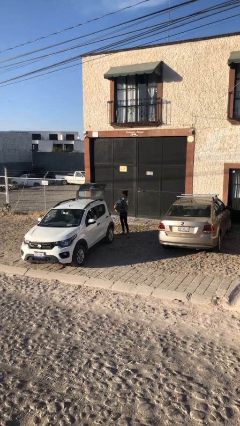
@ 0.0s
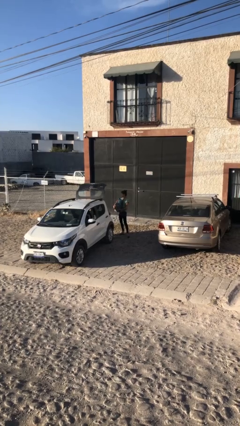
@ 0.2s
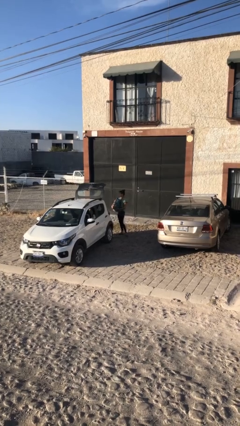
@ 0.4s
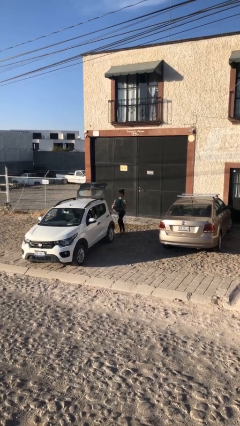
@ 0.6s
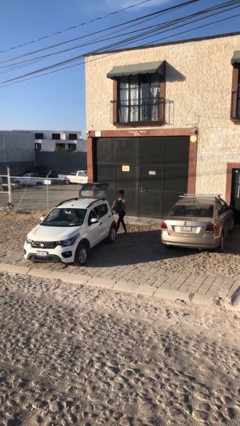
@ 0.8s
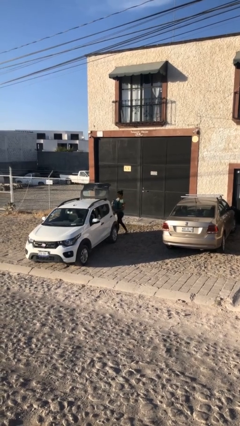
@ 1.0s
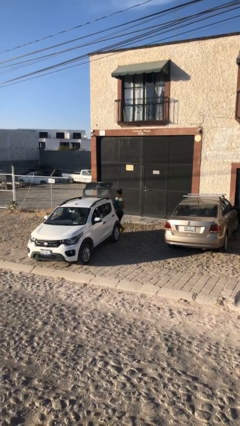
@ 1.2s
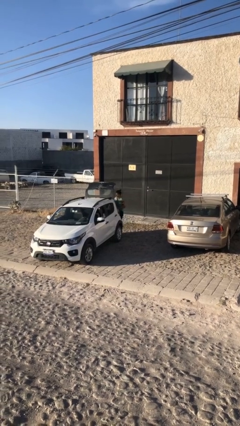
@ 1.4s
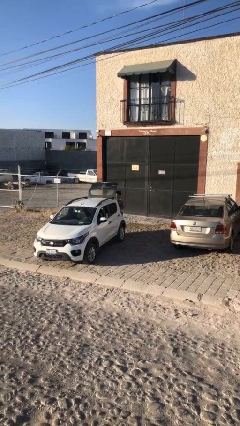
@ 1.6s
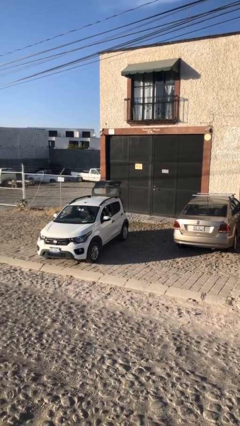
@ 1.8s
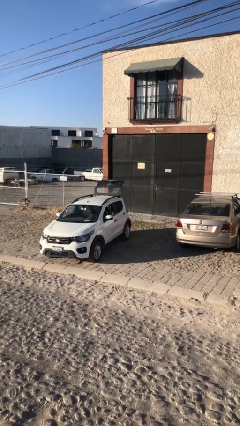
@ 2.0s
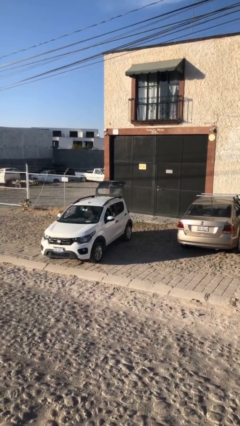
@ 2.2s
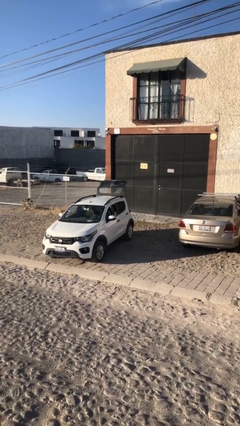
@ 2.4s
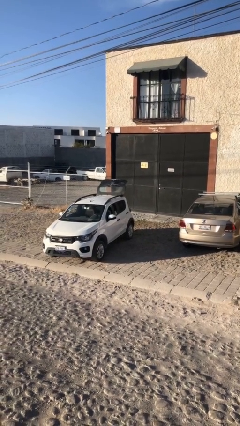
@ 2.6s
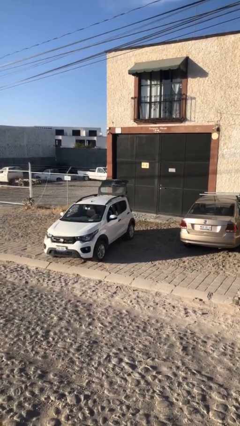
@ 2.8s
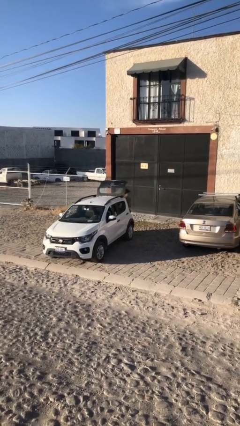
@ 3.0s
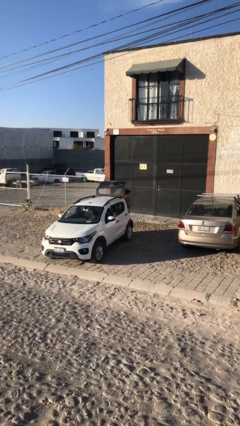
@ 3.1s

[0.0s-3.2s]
person loads car

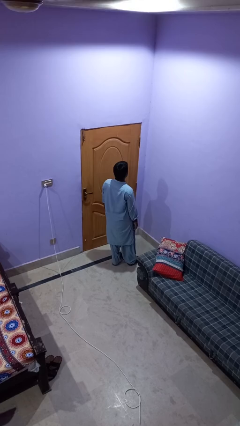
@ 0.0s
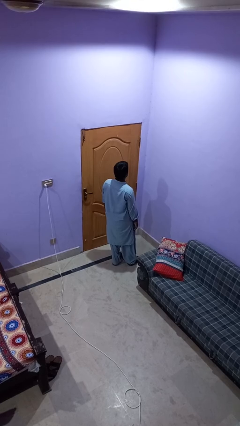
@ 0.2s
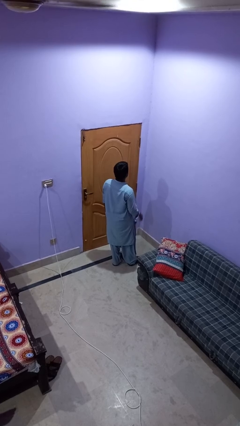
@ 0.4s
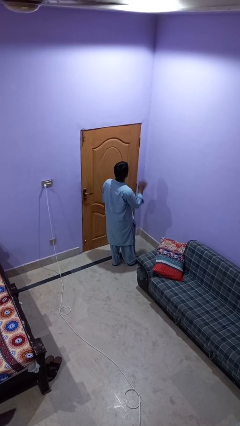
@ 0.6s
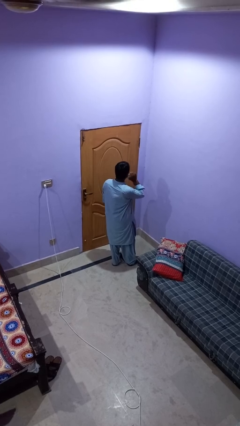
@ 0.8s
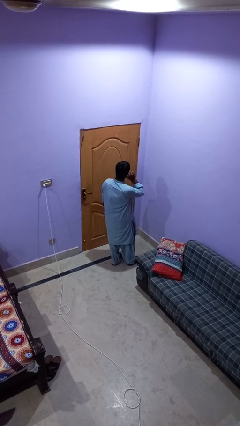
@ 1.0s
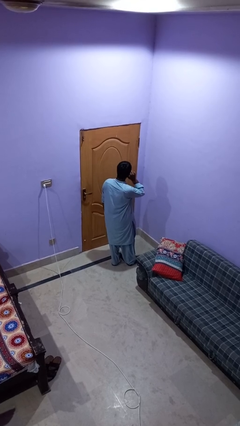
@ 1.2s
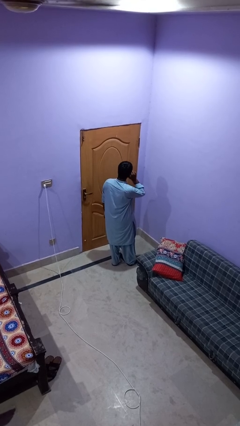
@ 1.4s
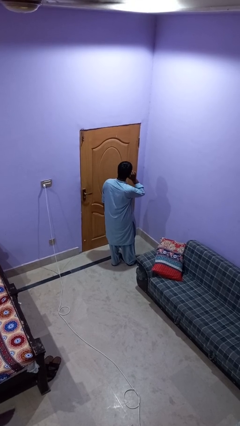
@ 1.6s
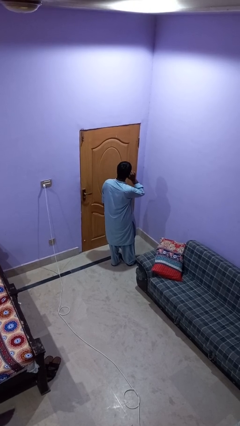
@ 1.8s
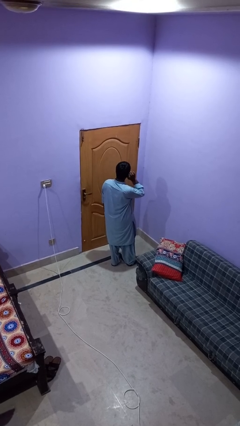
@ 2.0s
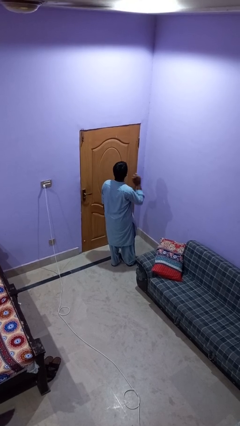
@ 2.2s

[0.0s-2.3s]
person gestures listen closely

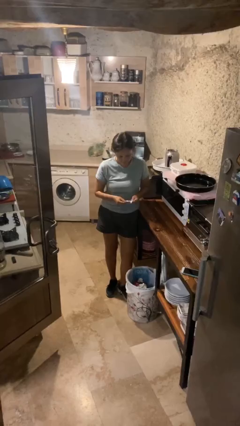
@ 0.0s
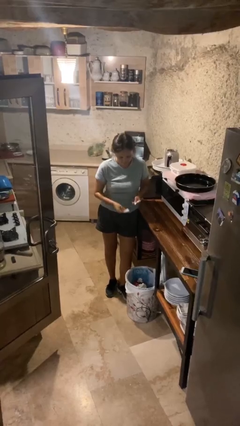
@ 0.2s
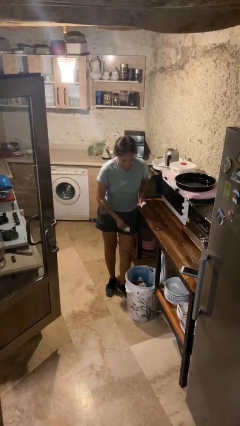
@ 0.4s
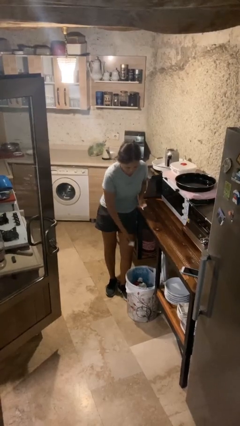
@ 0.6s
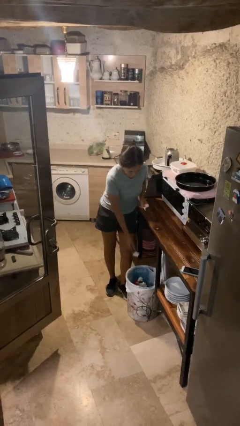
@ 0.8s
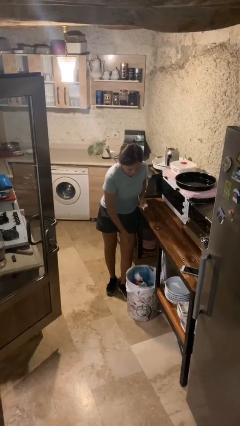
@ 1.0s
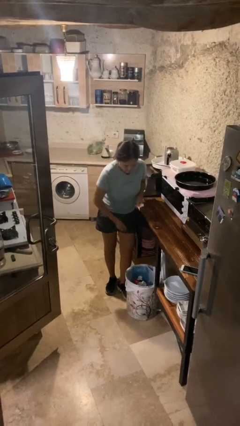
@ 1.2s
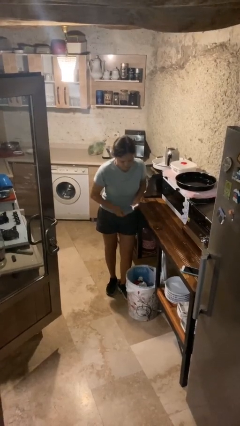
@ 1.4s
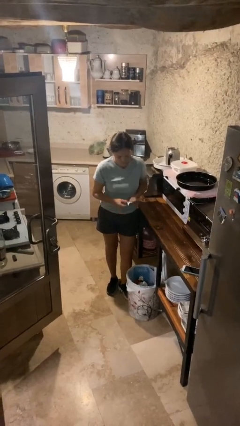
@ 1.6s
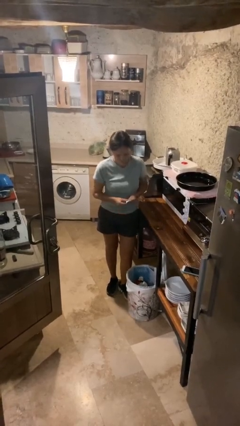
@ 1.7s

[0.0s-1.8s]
person discards trash

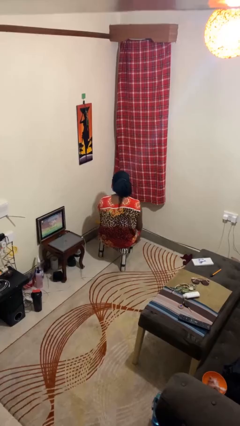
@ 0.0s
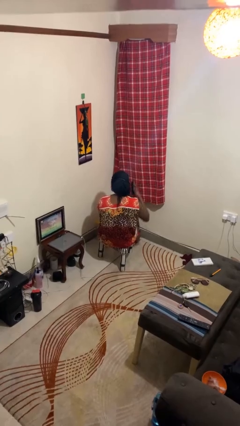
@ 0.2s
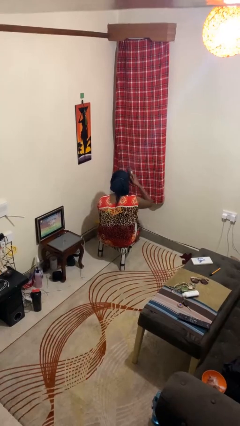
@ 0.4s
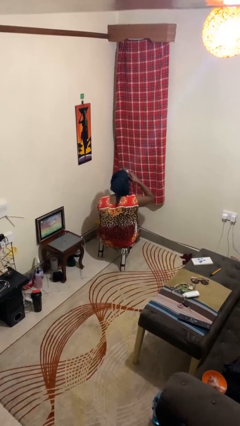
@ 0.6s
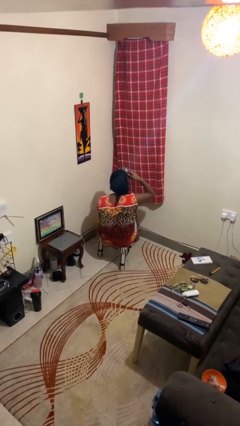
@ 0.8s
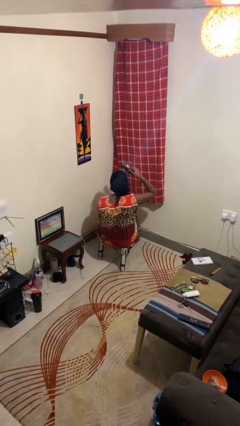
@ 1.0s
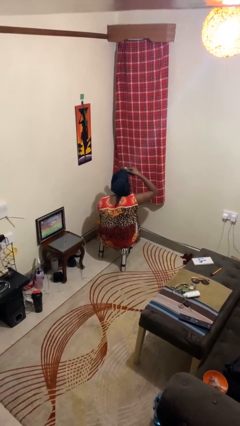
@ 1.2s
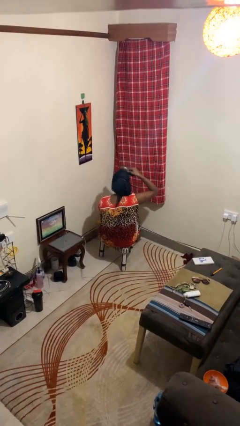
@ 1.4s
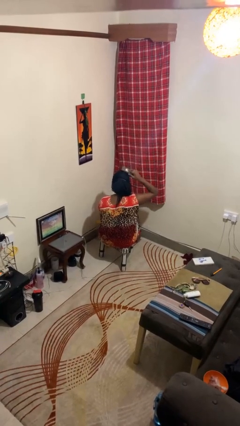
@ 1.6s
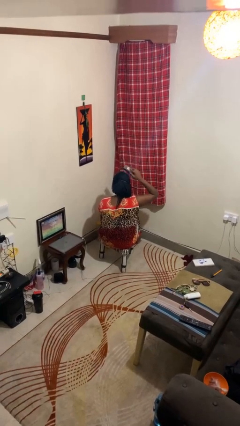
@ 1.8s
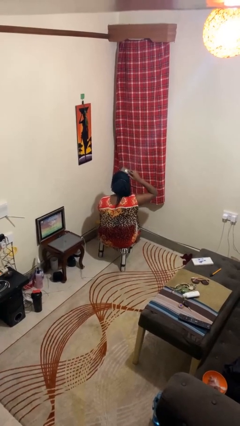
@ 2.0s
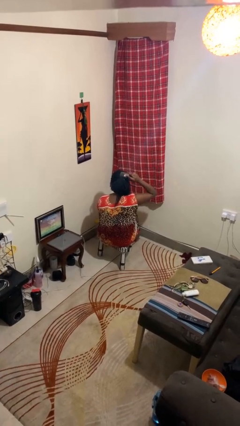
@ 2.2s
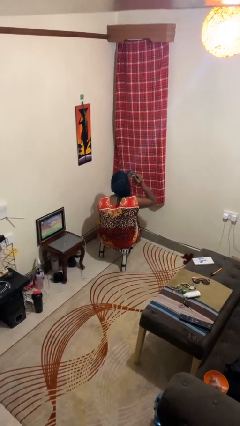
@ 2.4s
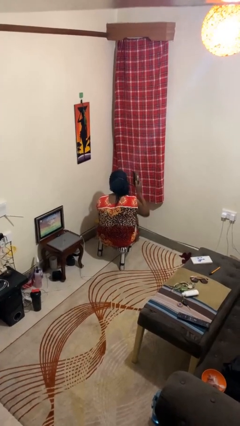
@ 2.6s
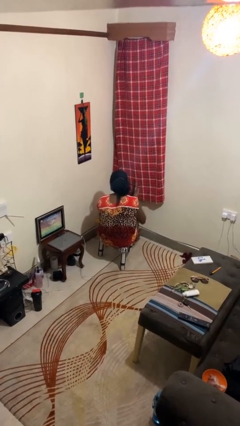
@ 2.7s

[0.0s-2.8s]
person brushes hair

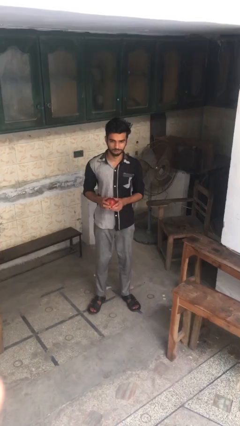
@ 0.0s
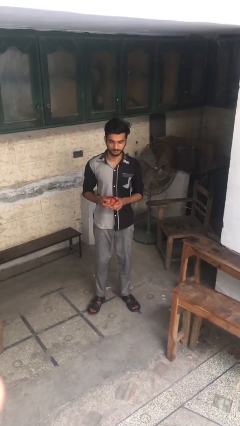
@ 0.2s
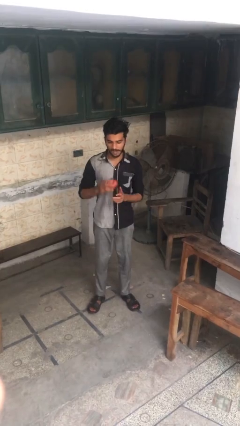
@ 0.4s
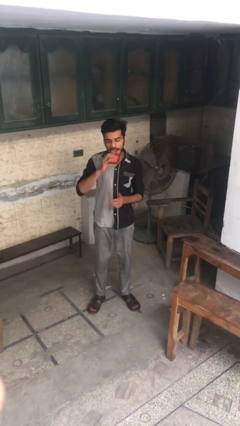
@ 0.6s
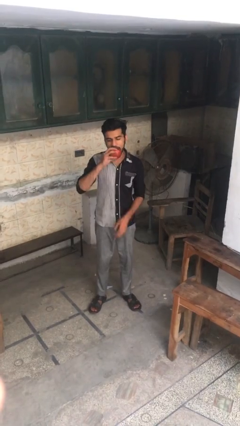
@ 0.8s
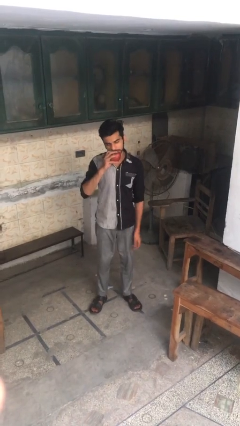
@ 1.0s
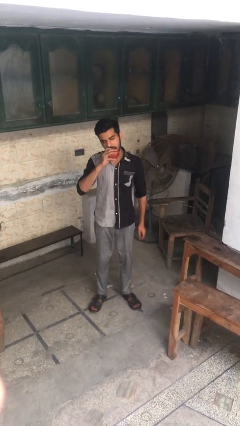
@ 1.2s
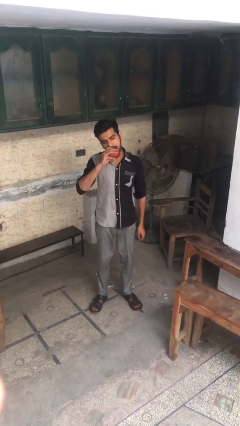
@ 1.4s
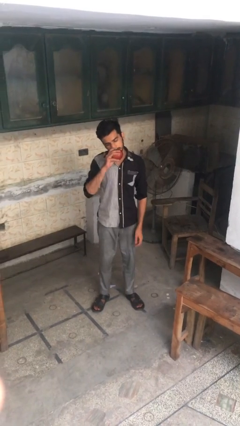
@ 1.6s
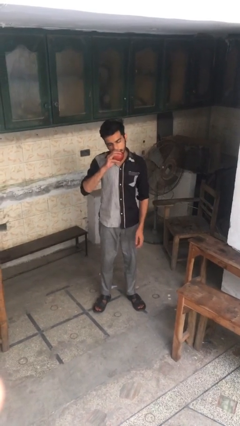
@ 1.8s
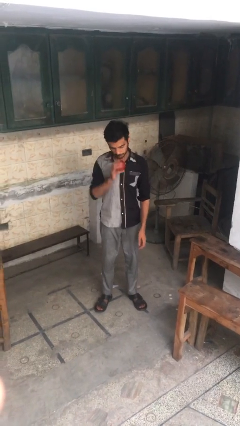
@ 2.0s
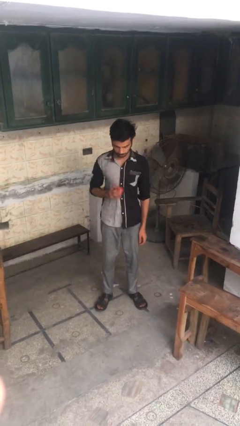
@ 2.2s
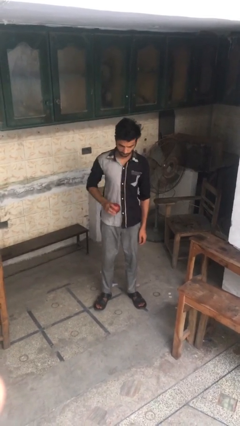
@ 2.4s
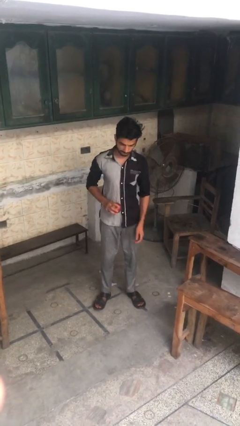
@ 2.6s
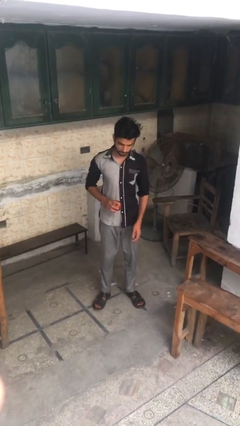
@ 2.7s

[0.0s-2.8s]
person eats apple

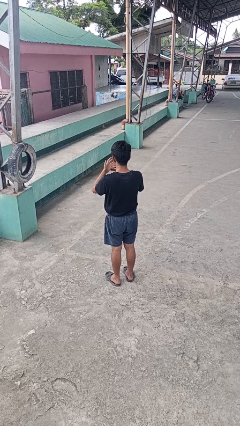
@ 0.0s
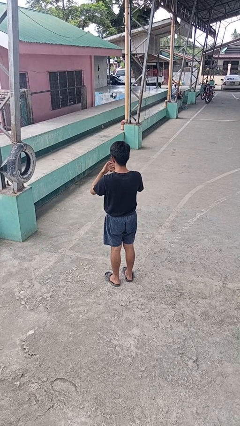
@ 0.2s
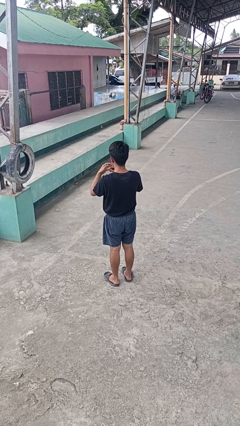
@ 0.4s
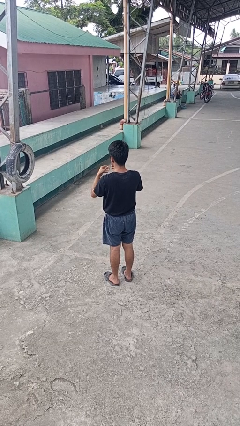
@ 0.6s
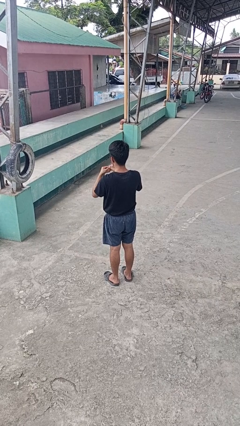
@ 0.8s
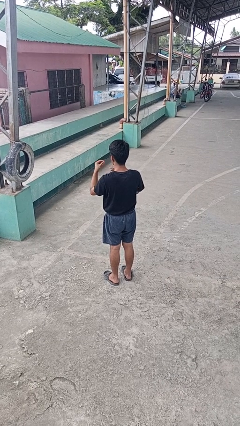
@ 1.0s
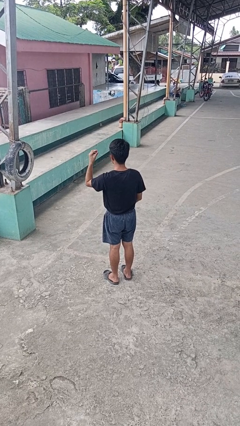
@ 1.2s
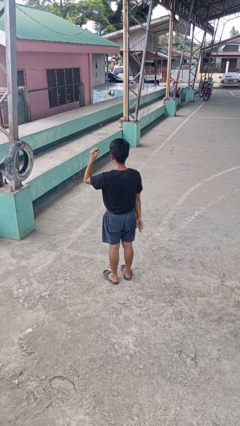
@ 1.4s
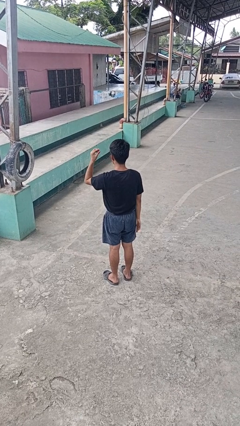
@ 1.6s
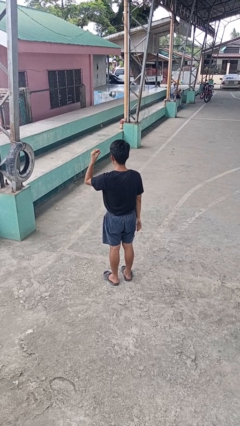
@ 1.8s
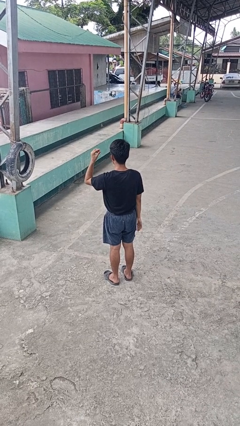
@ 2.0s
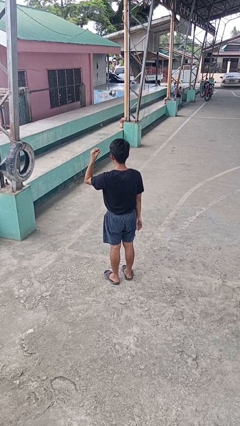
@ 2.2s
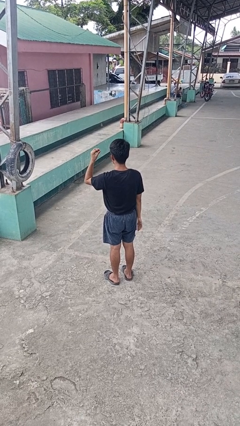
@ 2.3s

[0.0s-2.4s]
person takes off ring

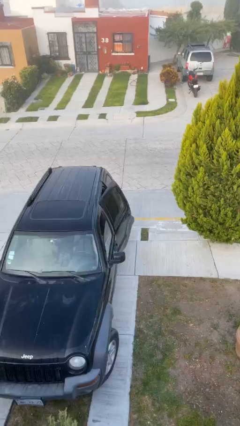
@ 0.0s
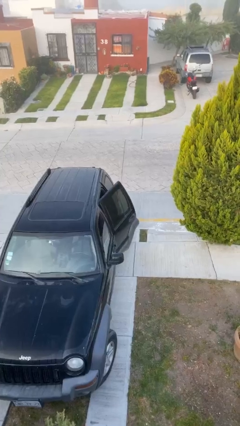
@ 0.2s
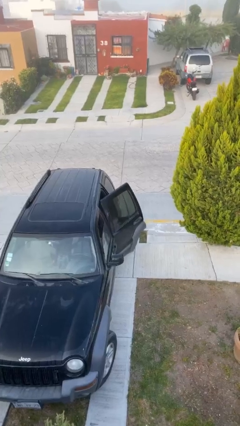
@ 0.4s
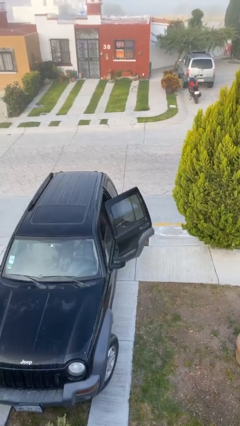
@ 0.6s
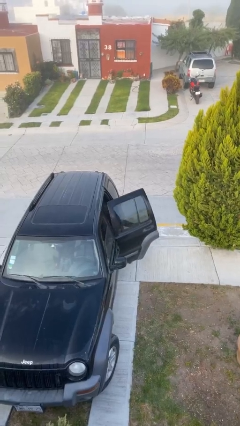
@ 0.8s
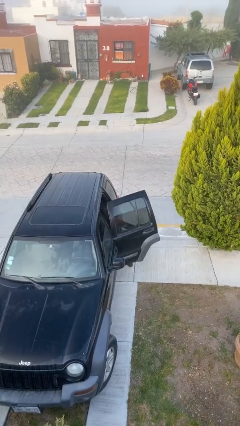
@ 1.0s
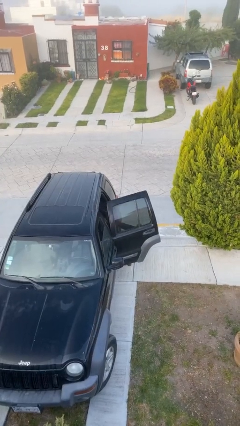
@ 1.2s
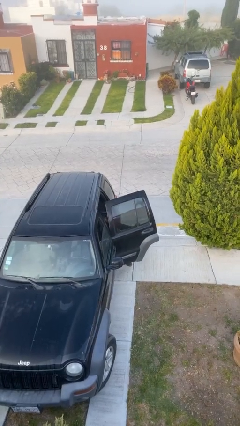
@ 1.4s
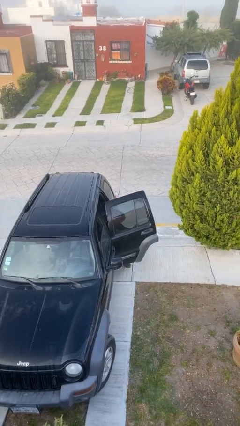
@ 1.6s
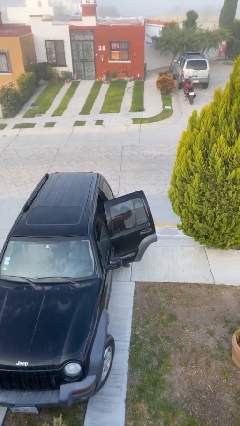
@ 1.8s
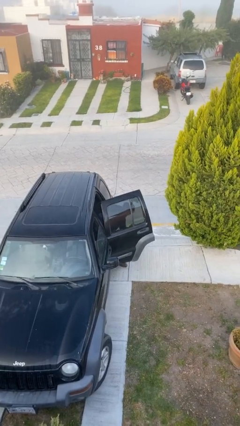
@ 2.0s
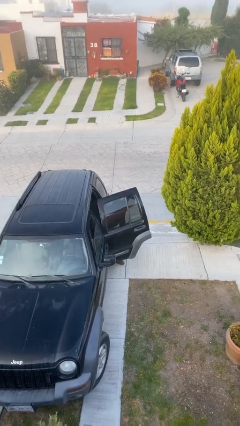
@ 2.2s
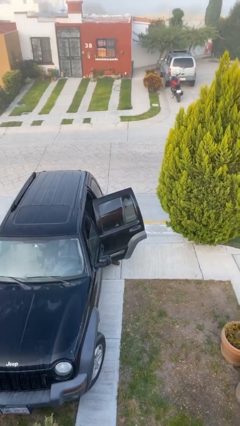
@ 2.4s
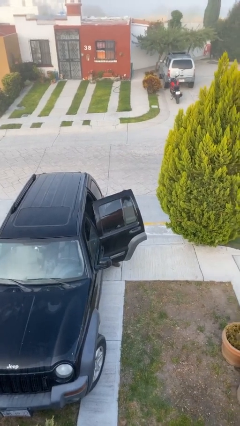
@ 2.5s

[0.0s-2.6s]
person opens car door
